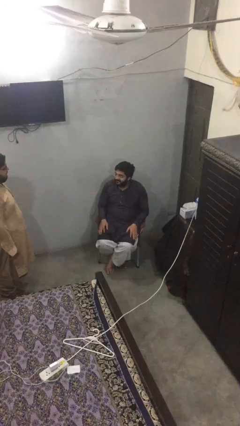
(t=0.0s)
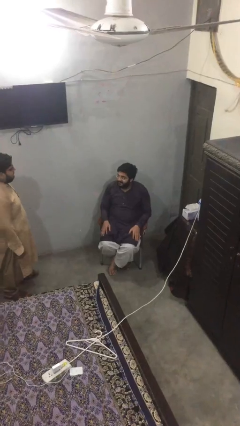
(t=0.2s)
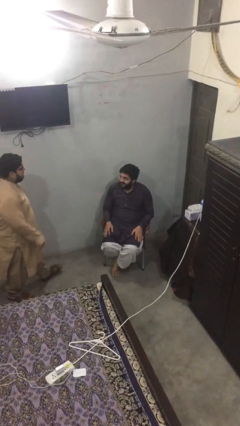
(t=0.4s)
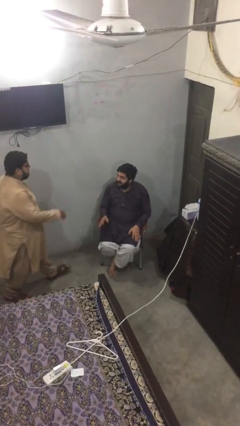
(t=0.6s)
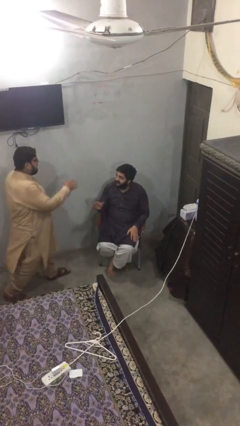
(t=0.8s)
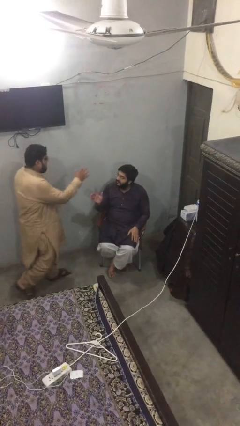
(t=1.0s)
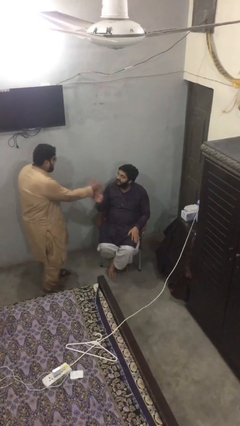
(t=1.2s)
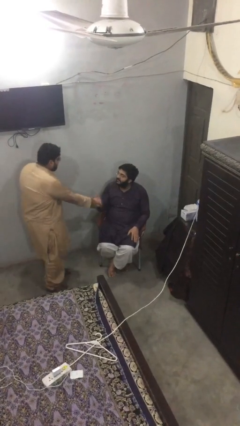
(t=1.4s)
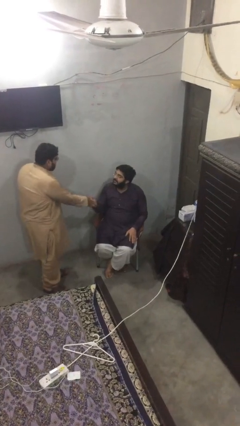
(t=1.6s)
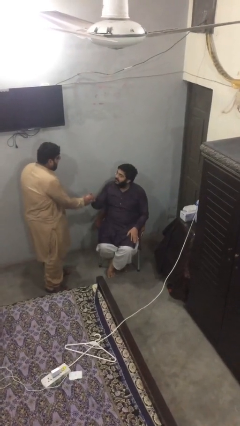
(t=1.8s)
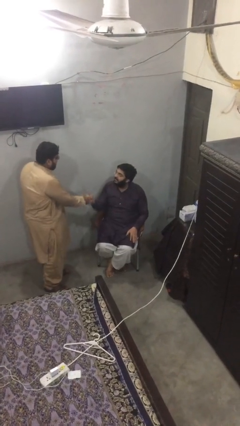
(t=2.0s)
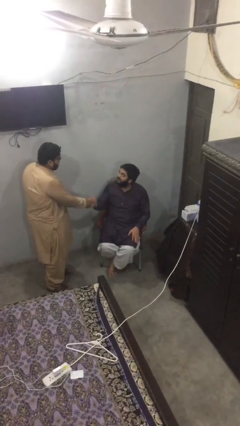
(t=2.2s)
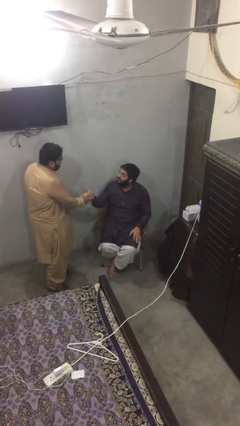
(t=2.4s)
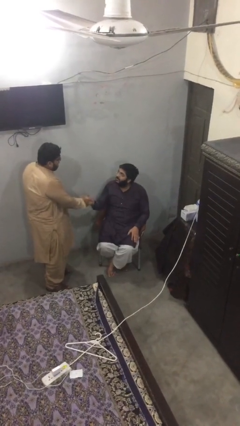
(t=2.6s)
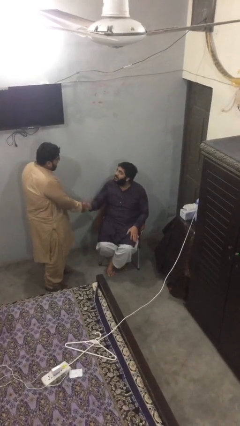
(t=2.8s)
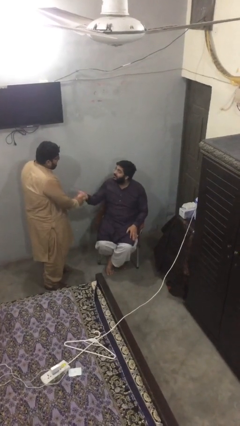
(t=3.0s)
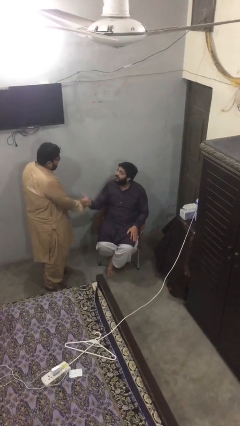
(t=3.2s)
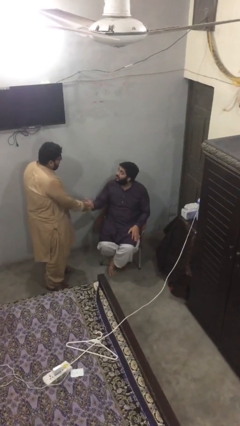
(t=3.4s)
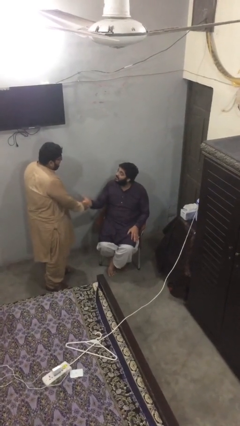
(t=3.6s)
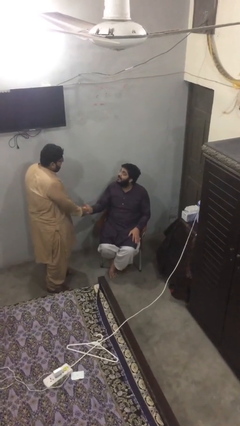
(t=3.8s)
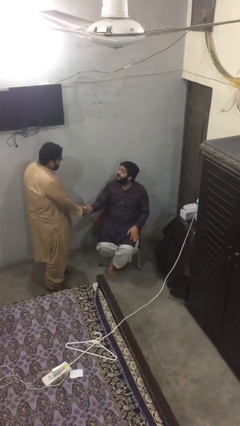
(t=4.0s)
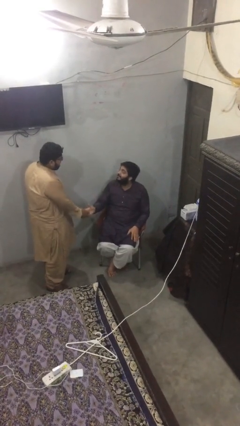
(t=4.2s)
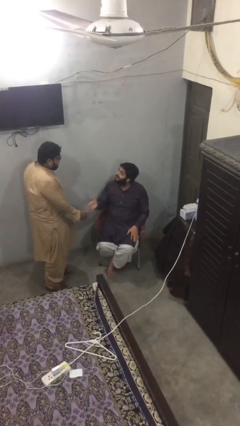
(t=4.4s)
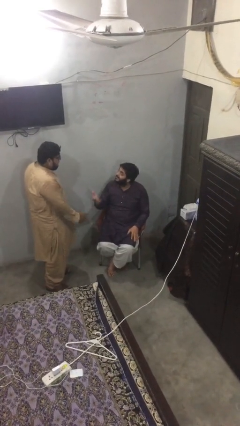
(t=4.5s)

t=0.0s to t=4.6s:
person shakes hand

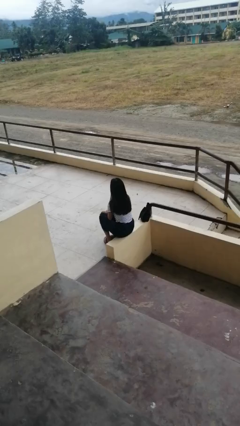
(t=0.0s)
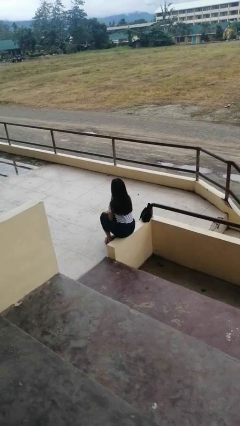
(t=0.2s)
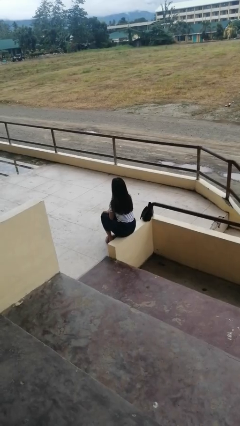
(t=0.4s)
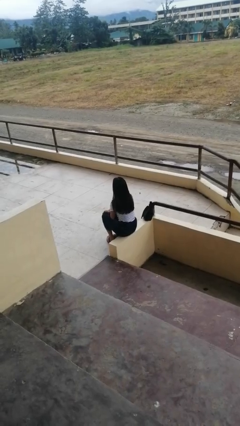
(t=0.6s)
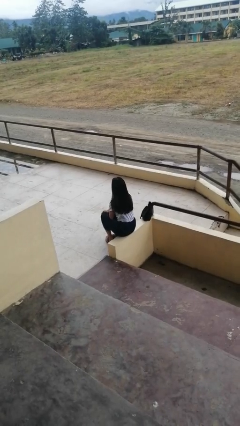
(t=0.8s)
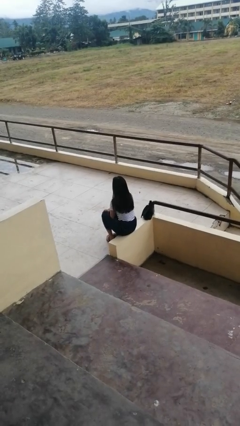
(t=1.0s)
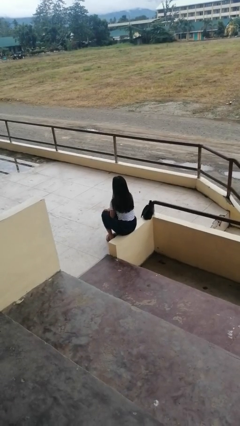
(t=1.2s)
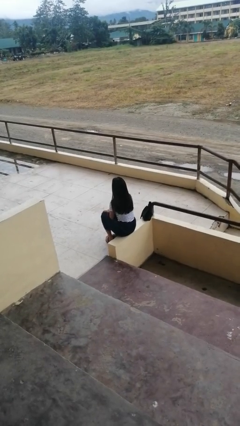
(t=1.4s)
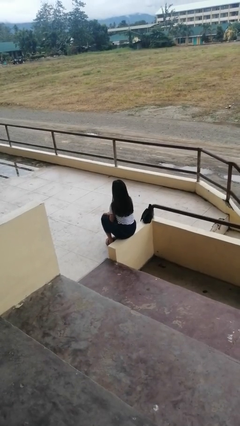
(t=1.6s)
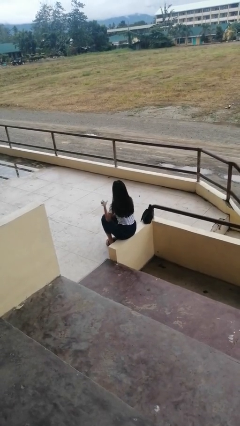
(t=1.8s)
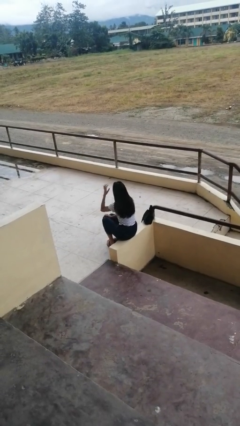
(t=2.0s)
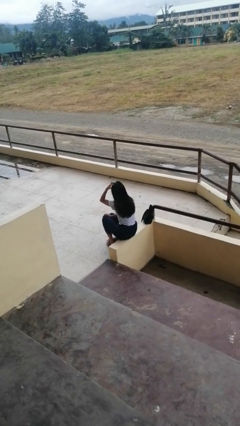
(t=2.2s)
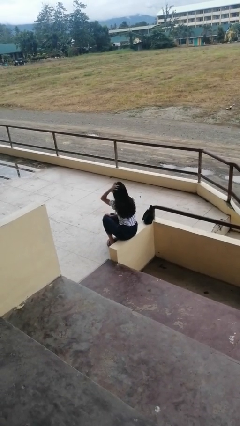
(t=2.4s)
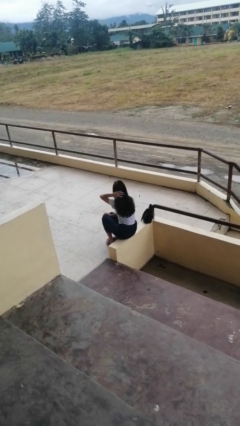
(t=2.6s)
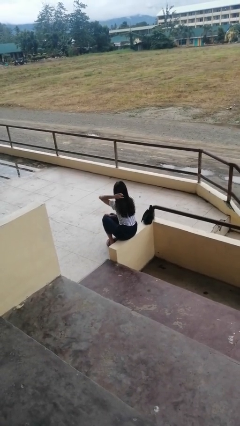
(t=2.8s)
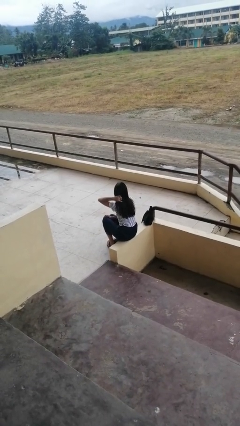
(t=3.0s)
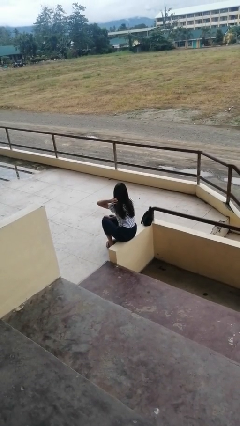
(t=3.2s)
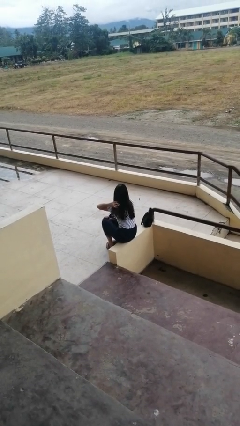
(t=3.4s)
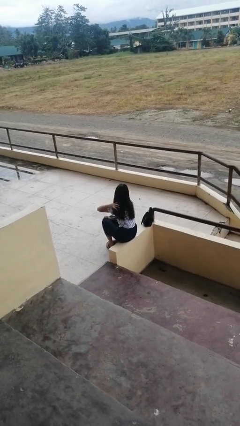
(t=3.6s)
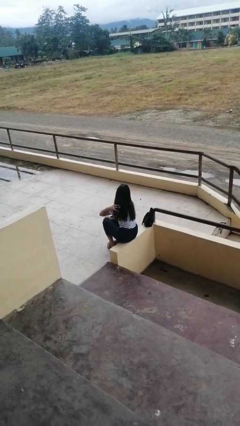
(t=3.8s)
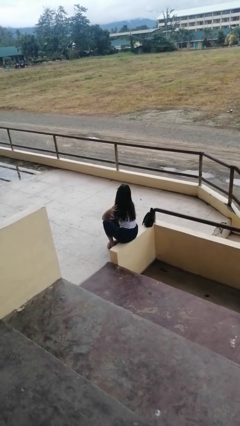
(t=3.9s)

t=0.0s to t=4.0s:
person strokes hair

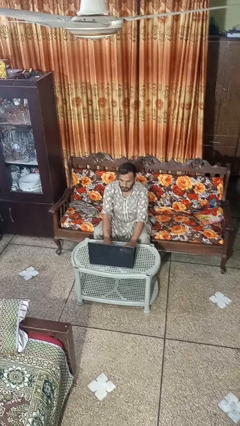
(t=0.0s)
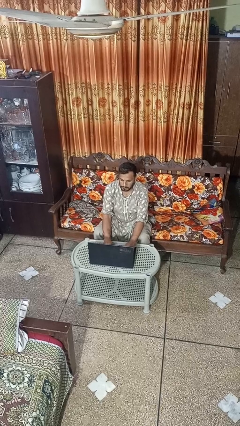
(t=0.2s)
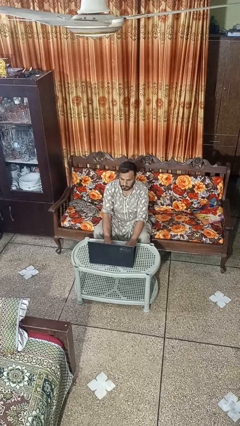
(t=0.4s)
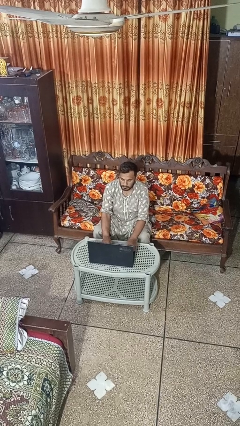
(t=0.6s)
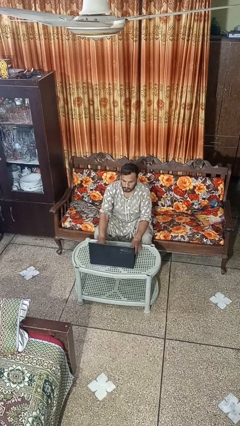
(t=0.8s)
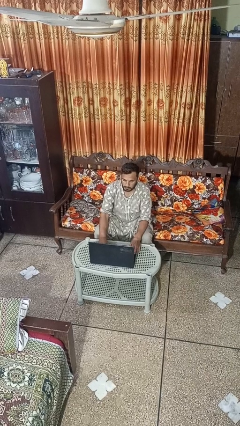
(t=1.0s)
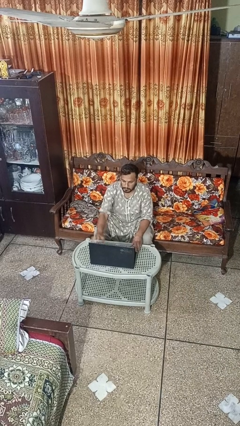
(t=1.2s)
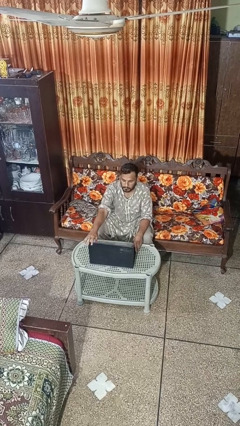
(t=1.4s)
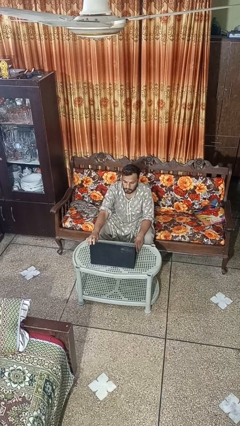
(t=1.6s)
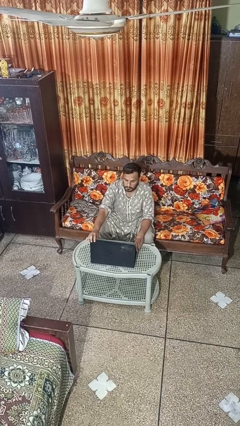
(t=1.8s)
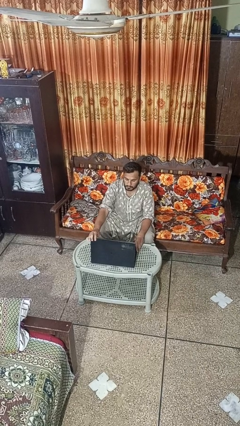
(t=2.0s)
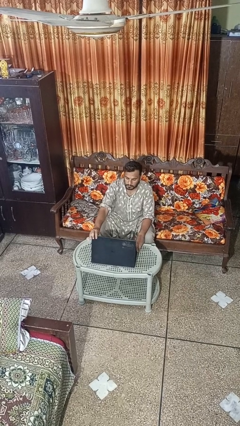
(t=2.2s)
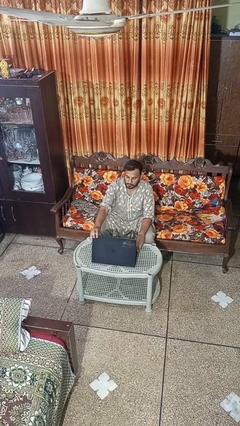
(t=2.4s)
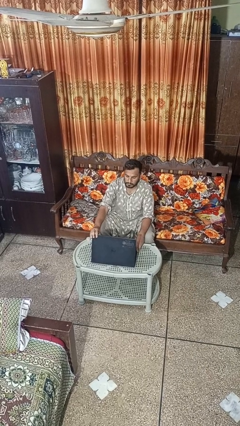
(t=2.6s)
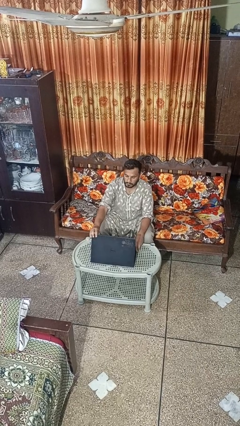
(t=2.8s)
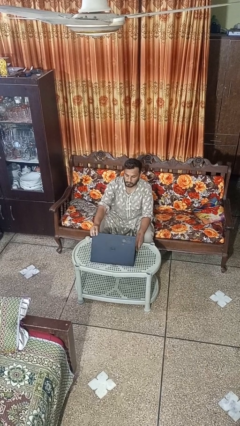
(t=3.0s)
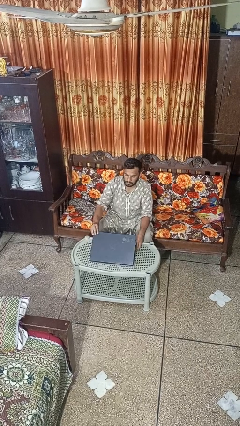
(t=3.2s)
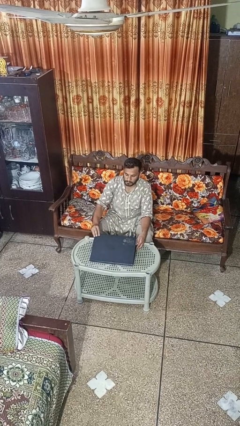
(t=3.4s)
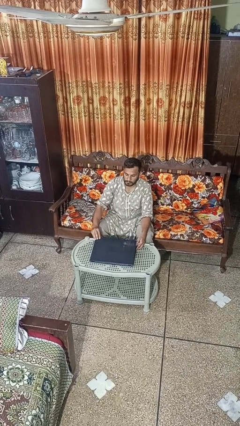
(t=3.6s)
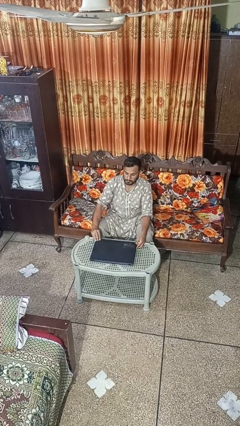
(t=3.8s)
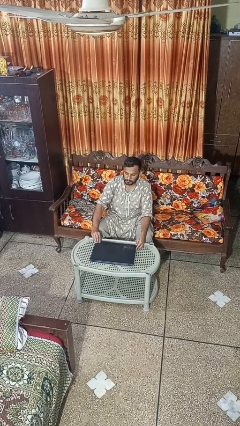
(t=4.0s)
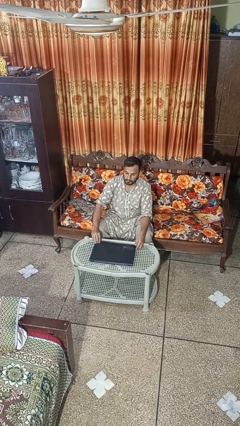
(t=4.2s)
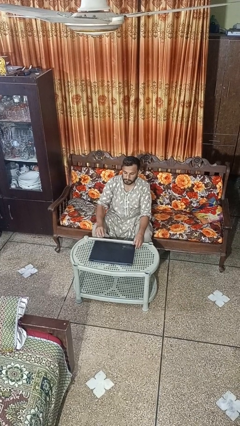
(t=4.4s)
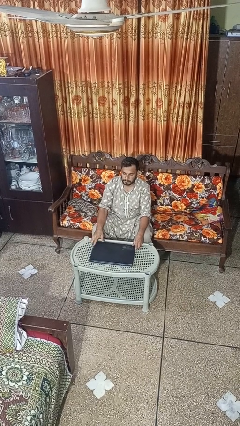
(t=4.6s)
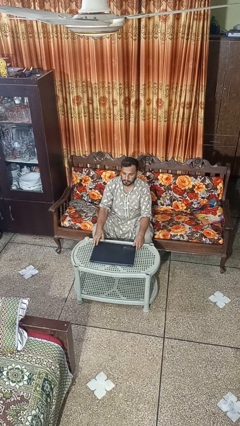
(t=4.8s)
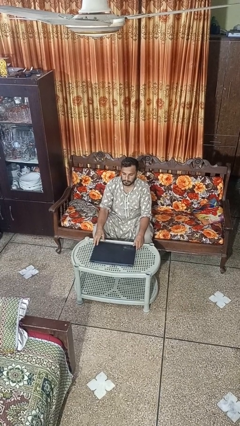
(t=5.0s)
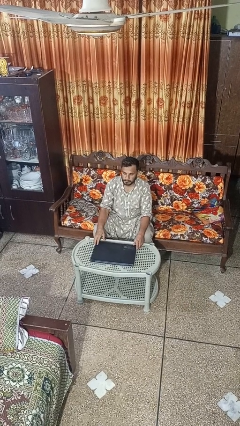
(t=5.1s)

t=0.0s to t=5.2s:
person closes laptop

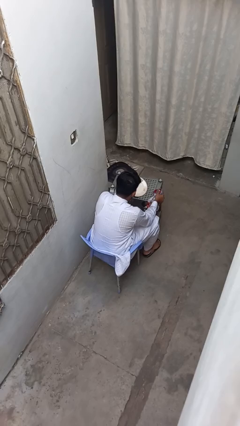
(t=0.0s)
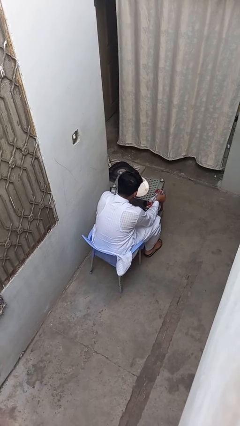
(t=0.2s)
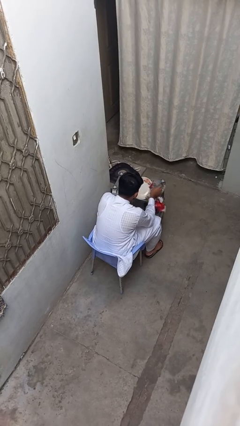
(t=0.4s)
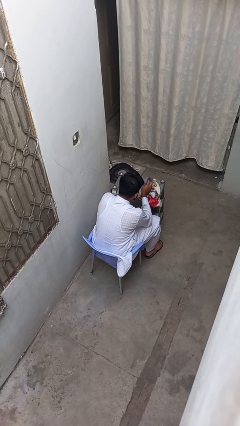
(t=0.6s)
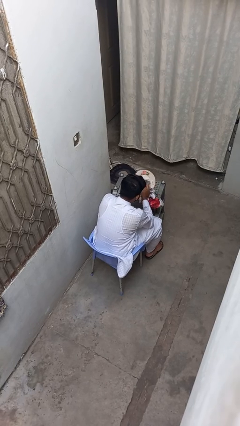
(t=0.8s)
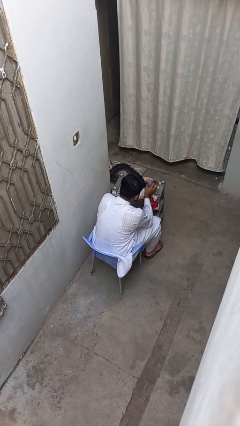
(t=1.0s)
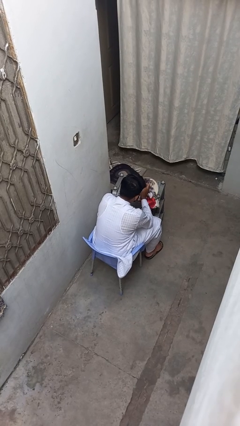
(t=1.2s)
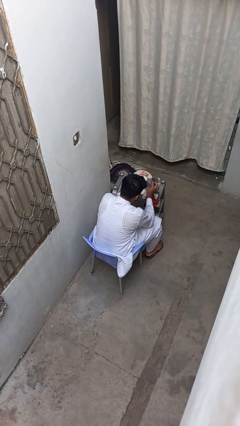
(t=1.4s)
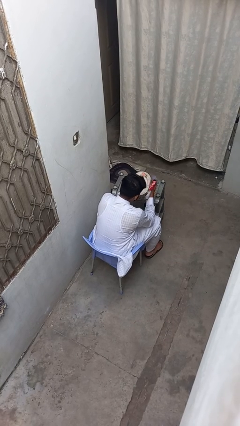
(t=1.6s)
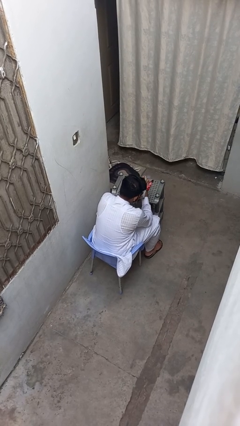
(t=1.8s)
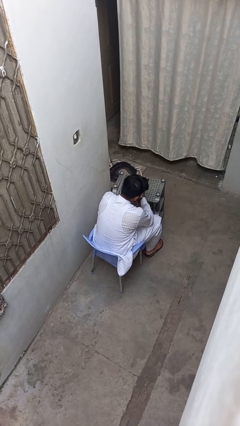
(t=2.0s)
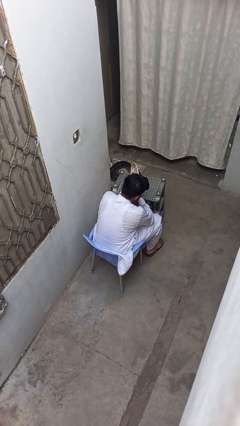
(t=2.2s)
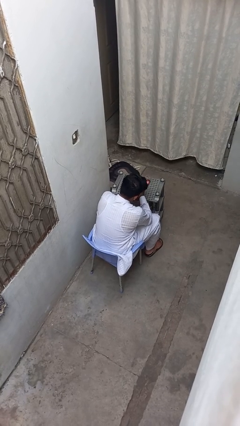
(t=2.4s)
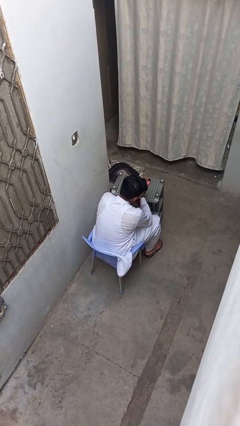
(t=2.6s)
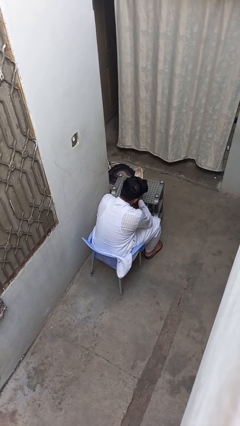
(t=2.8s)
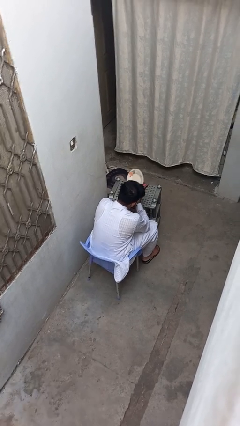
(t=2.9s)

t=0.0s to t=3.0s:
person dries dish

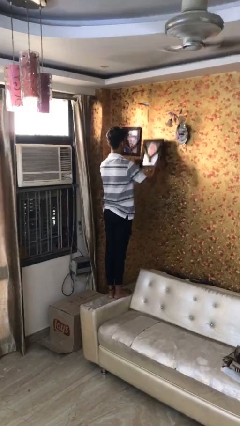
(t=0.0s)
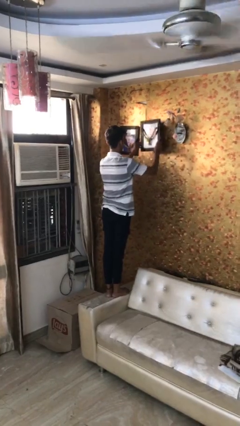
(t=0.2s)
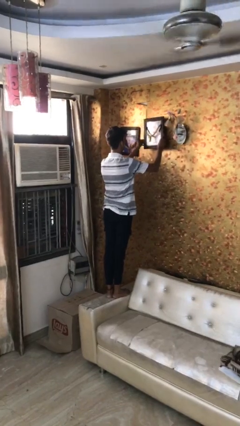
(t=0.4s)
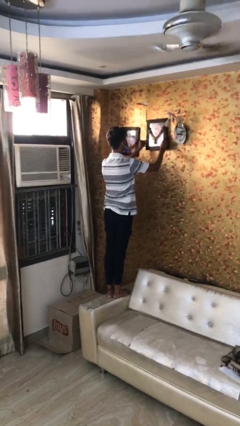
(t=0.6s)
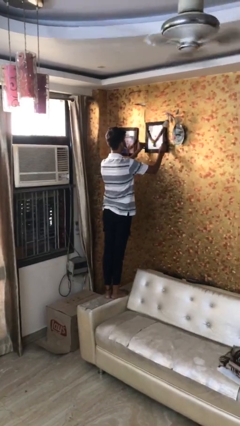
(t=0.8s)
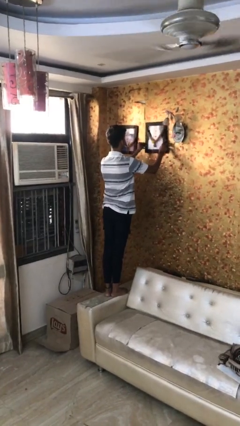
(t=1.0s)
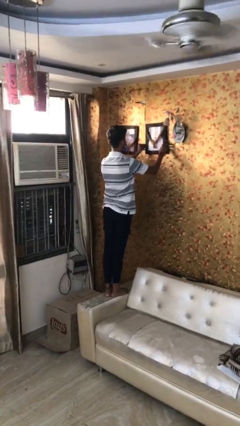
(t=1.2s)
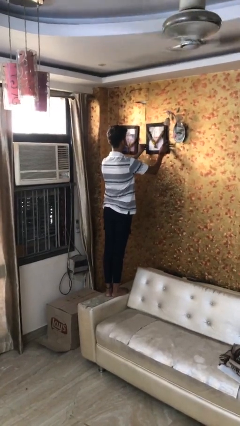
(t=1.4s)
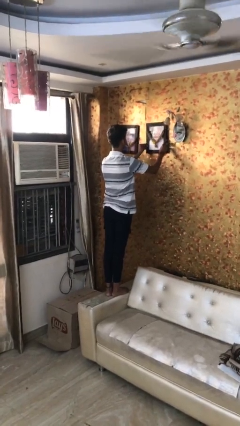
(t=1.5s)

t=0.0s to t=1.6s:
person puts up picture frame
